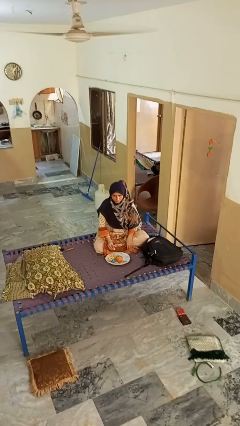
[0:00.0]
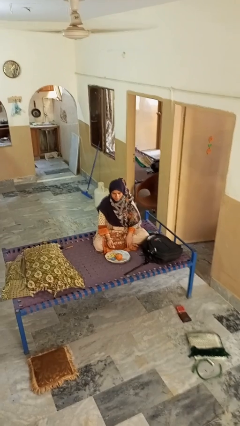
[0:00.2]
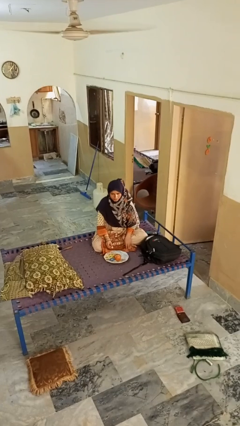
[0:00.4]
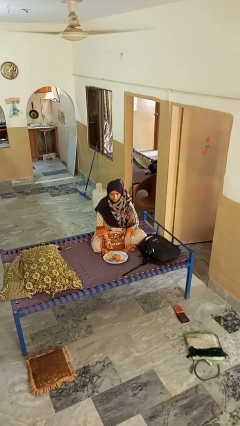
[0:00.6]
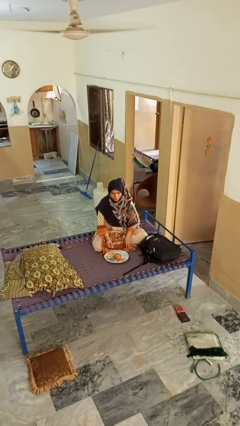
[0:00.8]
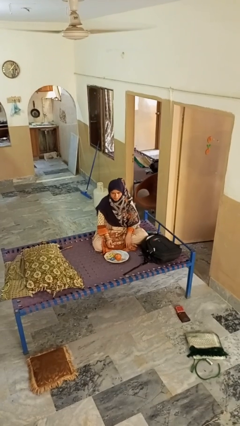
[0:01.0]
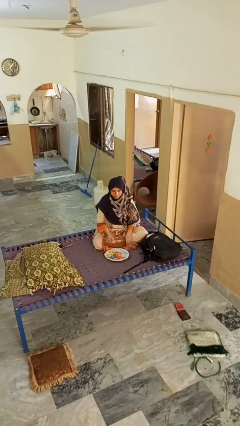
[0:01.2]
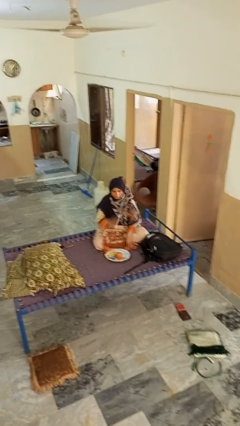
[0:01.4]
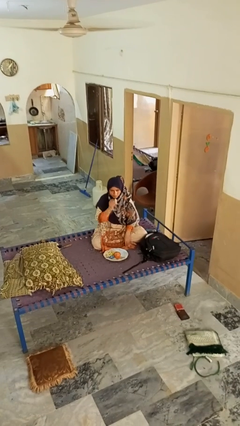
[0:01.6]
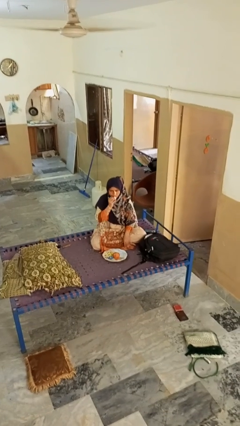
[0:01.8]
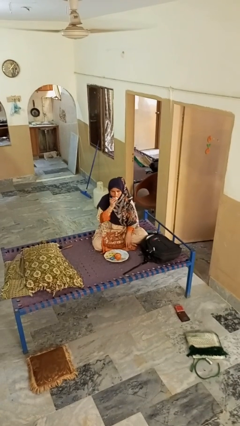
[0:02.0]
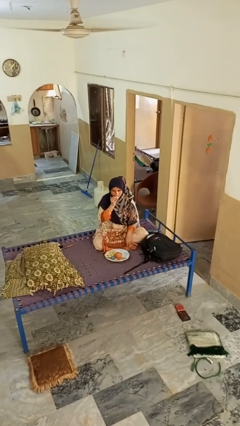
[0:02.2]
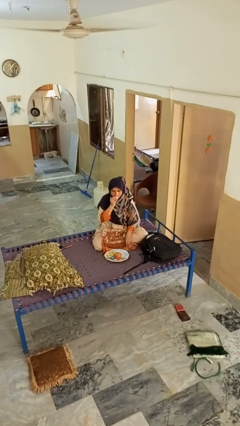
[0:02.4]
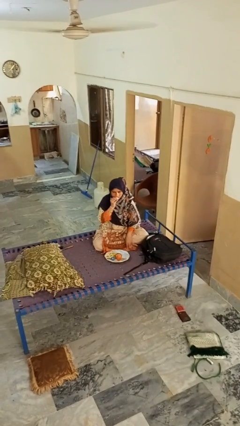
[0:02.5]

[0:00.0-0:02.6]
person eats apple

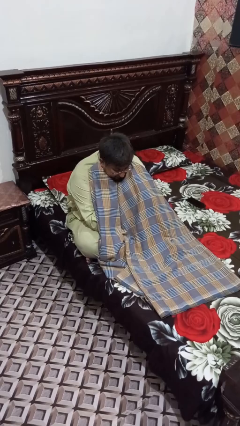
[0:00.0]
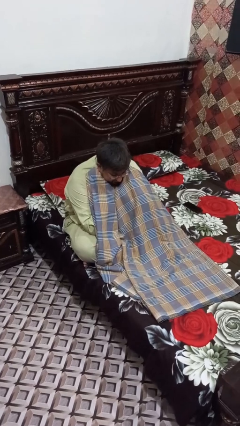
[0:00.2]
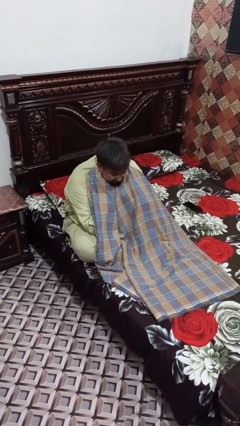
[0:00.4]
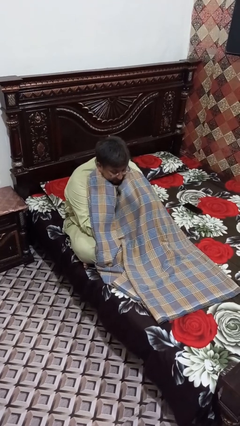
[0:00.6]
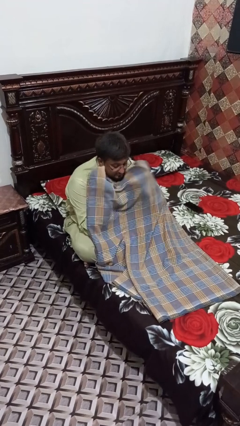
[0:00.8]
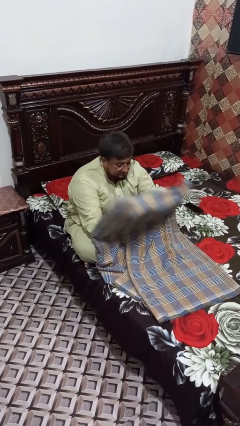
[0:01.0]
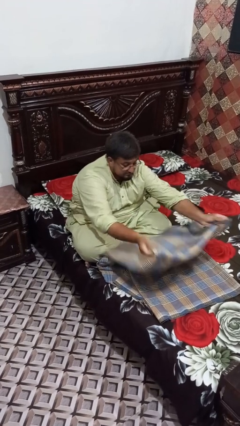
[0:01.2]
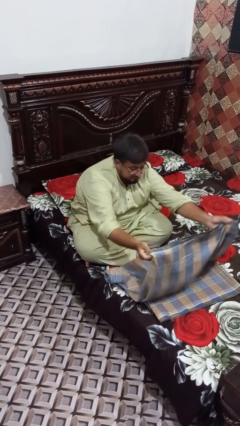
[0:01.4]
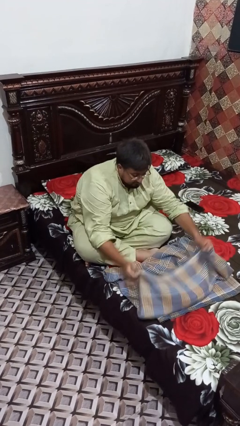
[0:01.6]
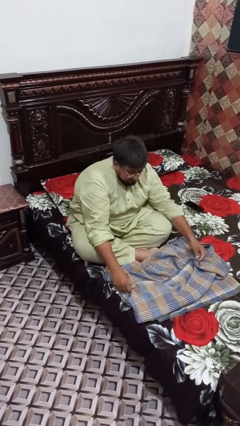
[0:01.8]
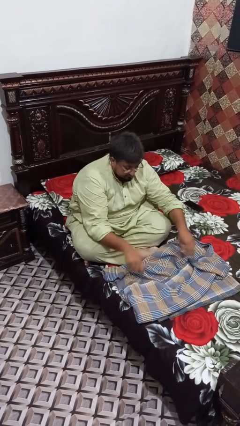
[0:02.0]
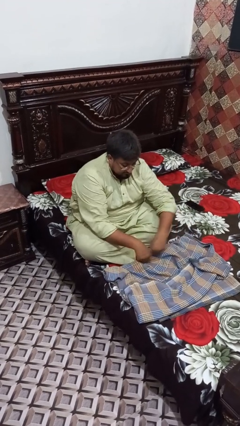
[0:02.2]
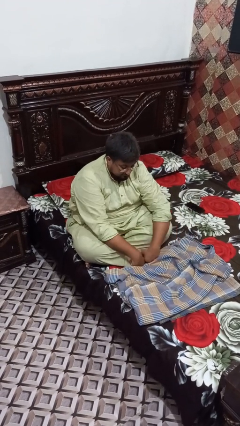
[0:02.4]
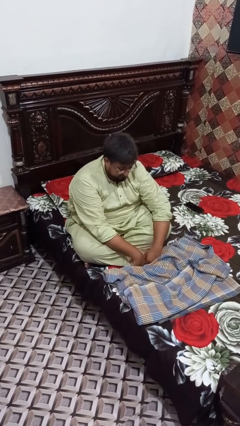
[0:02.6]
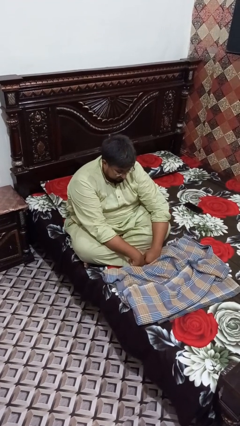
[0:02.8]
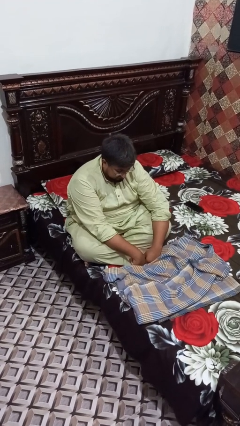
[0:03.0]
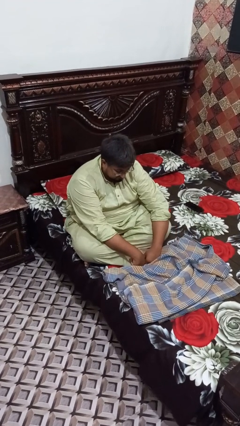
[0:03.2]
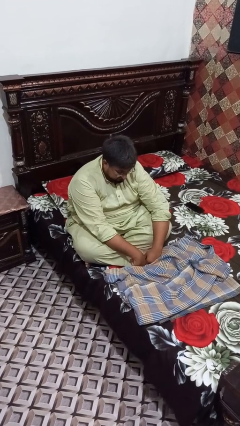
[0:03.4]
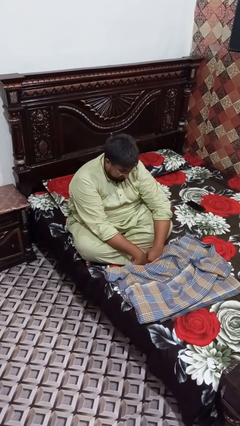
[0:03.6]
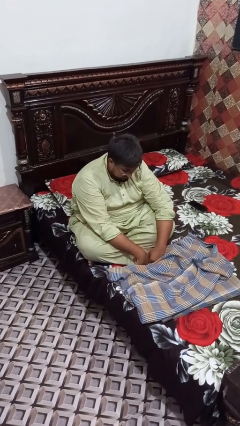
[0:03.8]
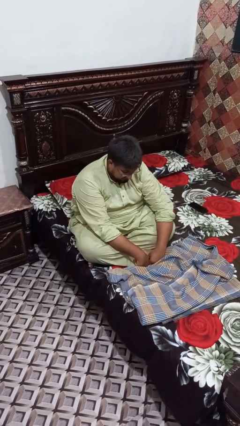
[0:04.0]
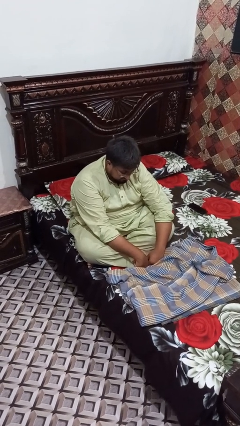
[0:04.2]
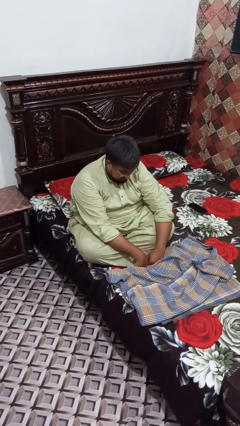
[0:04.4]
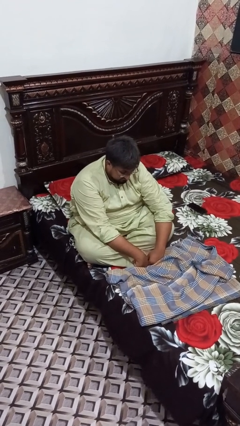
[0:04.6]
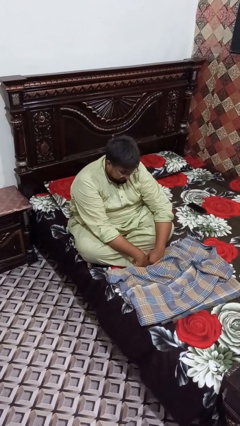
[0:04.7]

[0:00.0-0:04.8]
person uncovers with blanket

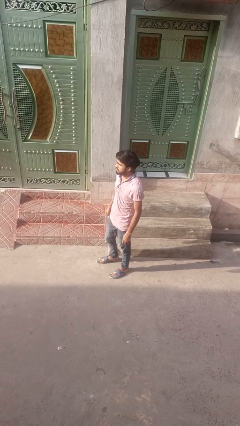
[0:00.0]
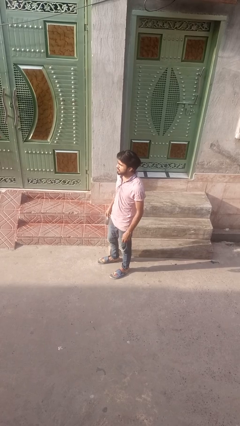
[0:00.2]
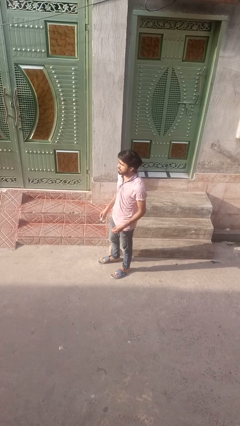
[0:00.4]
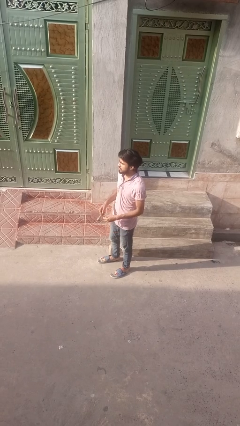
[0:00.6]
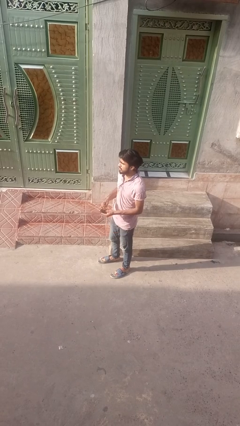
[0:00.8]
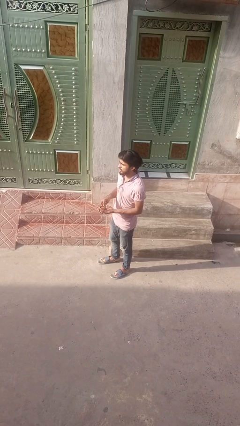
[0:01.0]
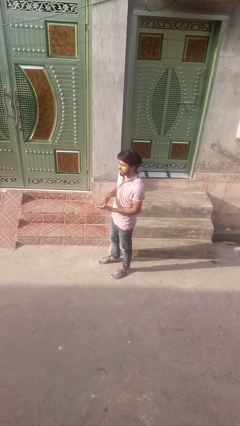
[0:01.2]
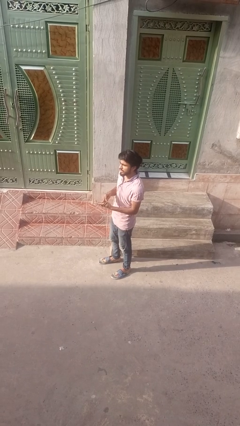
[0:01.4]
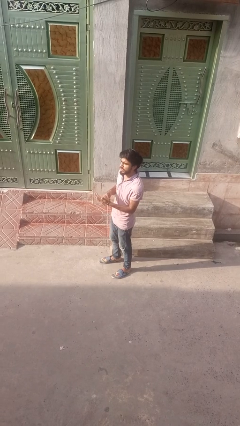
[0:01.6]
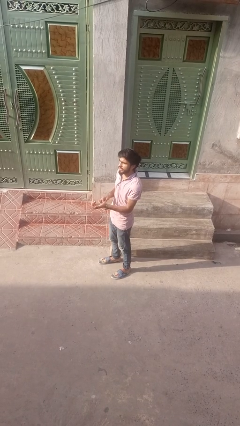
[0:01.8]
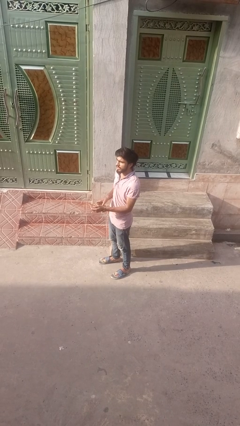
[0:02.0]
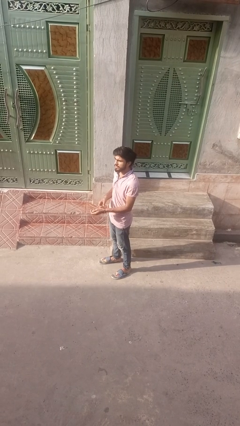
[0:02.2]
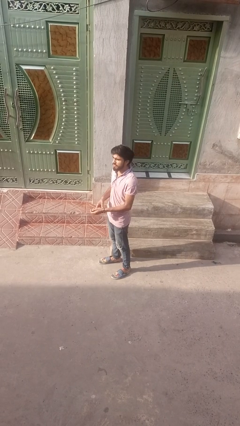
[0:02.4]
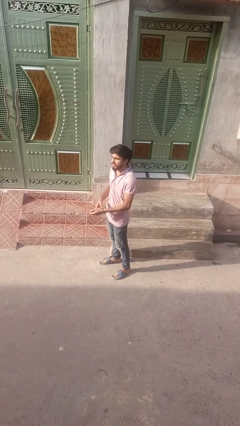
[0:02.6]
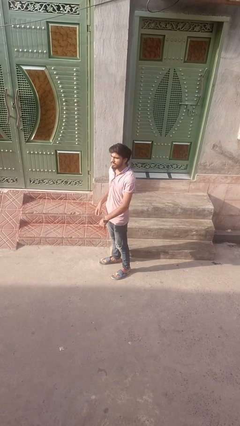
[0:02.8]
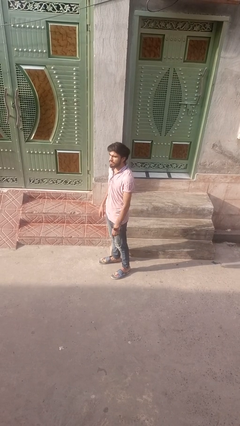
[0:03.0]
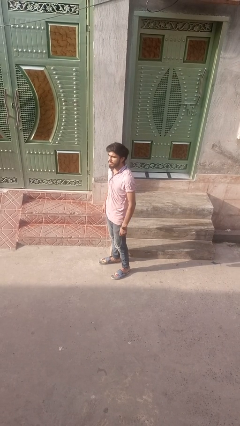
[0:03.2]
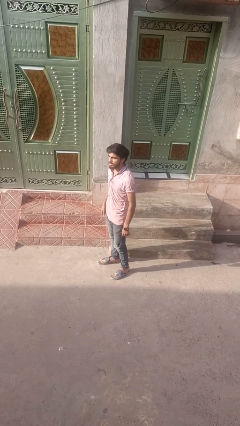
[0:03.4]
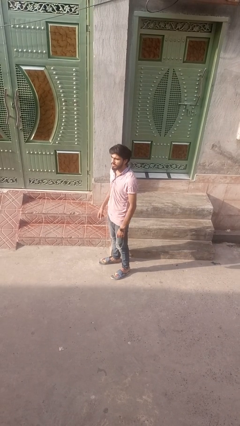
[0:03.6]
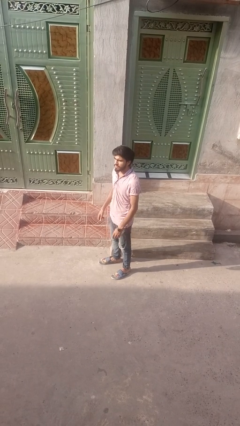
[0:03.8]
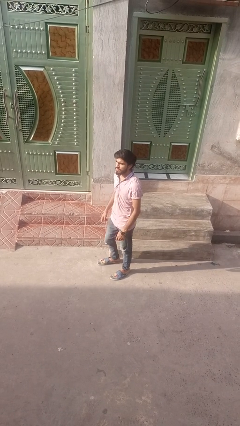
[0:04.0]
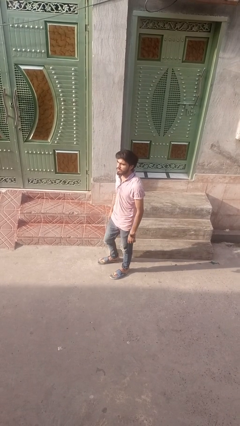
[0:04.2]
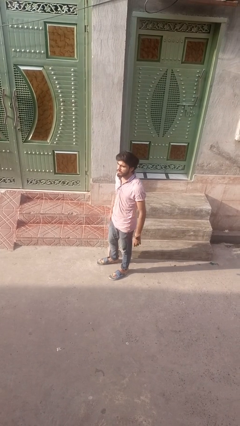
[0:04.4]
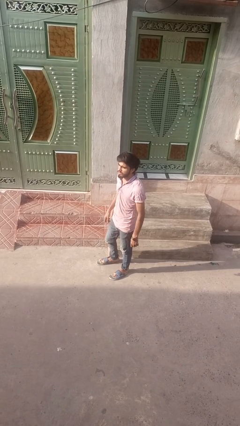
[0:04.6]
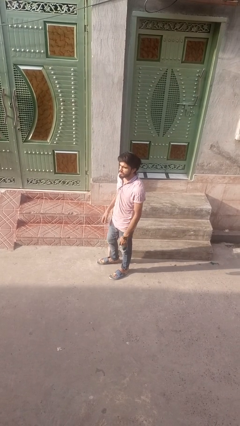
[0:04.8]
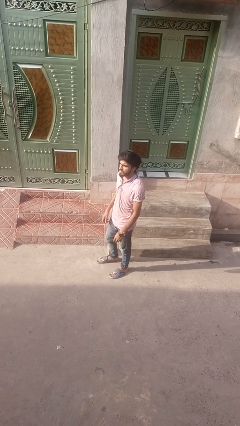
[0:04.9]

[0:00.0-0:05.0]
person puts on wristwatch

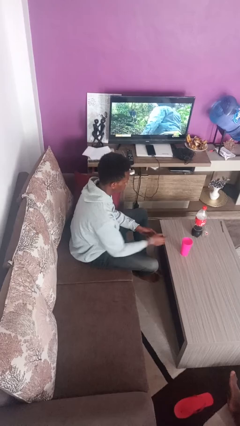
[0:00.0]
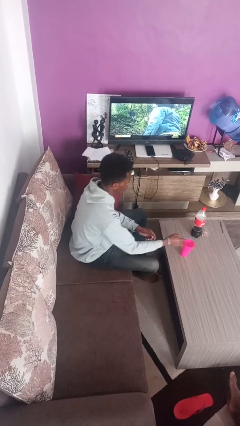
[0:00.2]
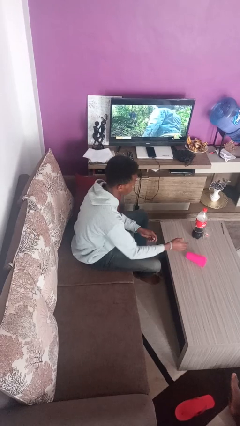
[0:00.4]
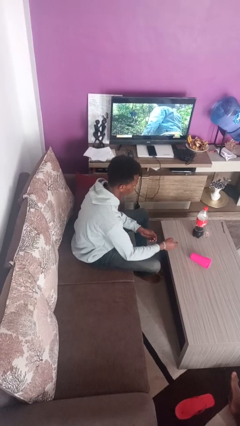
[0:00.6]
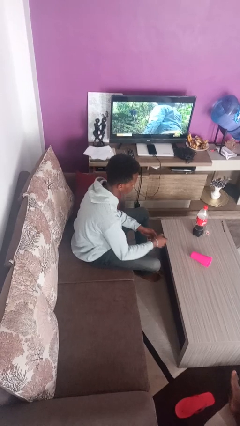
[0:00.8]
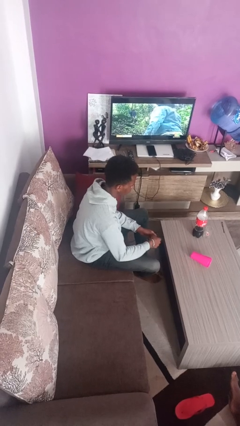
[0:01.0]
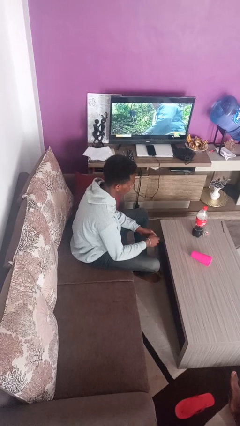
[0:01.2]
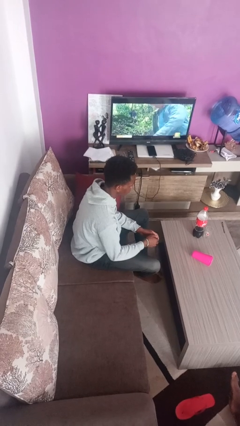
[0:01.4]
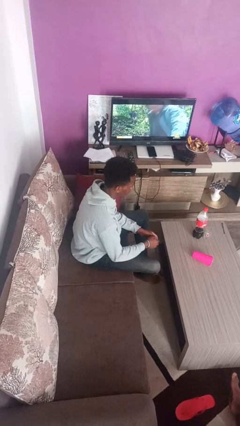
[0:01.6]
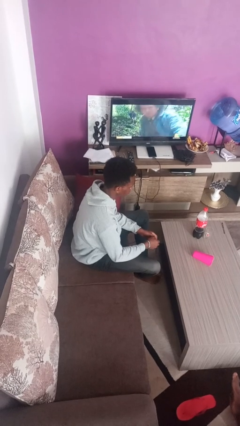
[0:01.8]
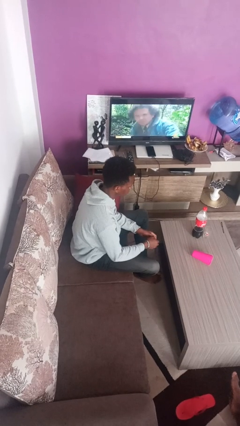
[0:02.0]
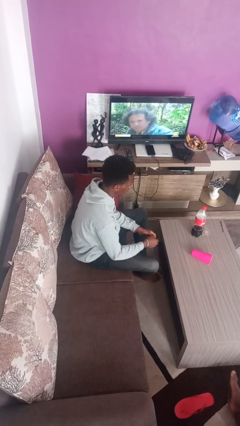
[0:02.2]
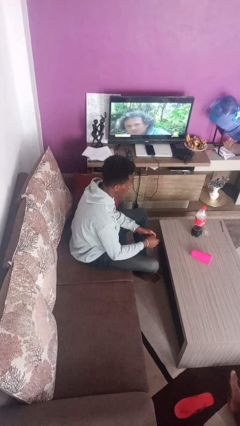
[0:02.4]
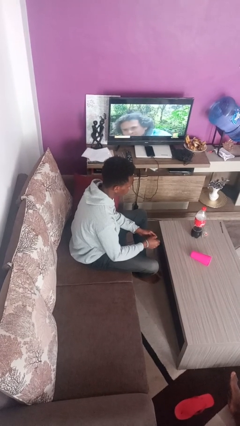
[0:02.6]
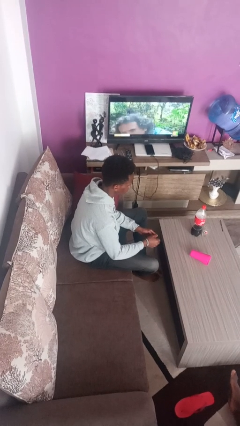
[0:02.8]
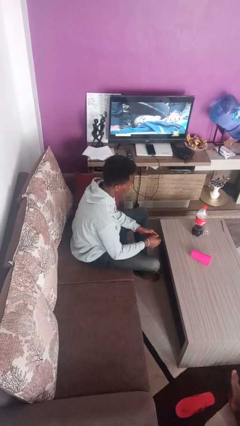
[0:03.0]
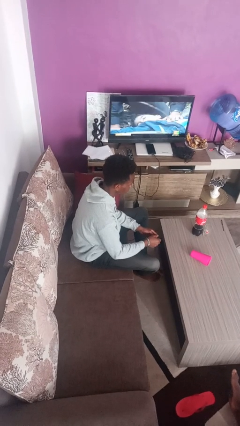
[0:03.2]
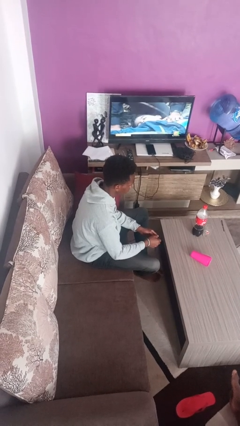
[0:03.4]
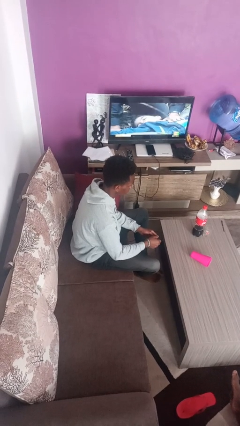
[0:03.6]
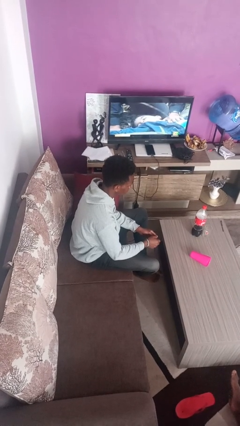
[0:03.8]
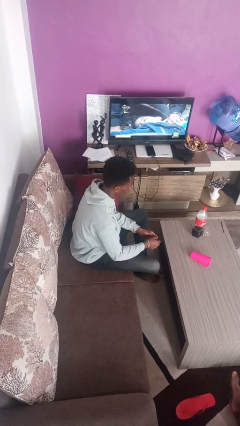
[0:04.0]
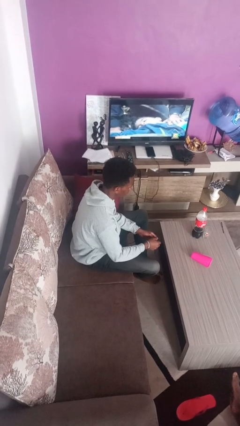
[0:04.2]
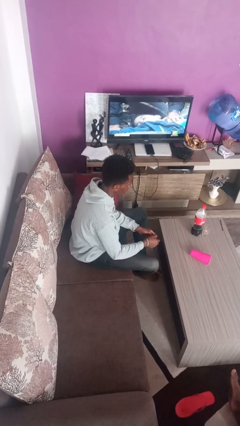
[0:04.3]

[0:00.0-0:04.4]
person knocks over glass

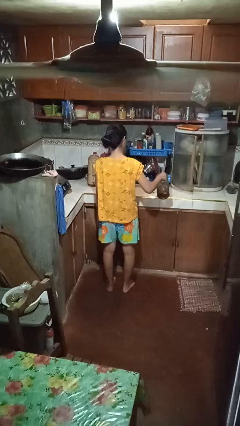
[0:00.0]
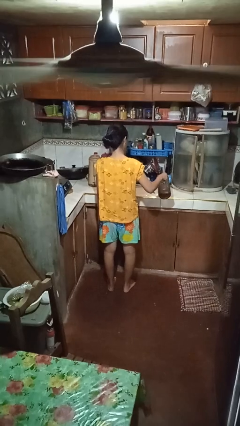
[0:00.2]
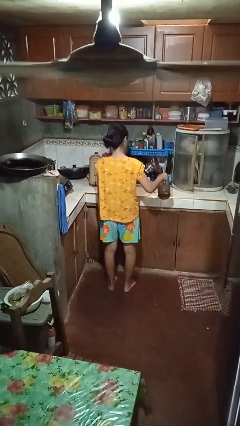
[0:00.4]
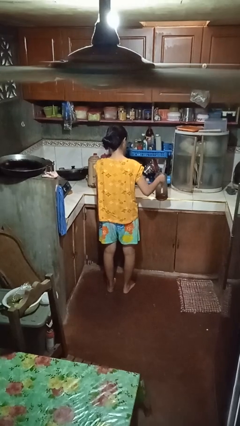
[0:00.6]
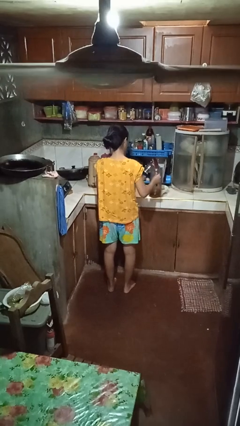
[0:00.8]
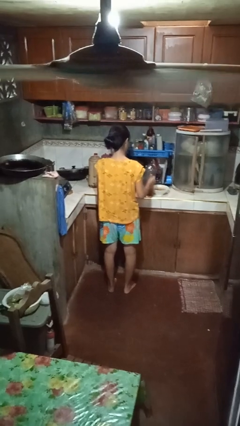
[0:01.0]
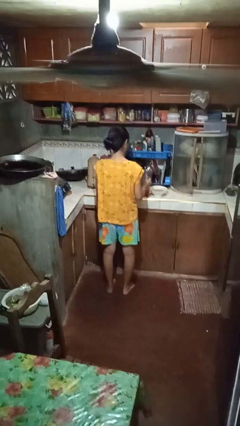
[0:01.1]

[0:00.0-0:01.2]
person pours into bowl
